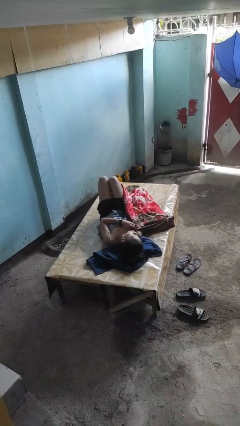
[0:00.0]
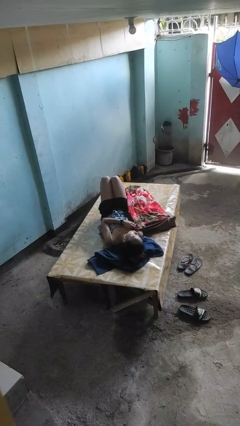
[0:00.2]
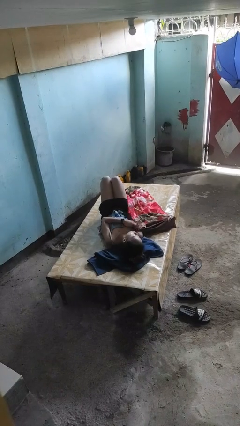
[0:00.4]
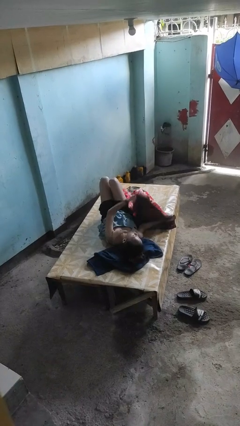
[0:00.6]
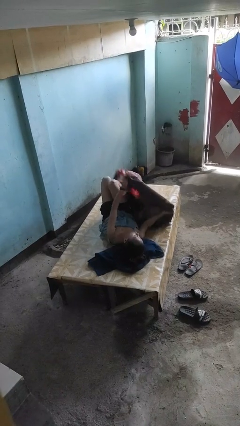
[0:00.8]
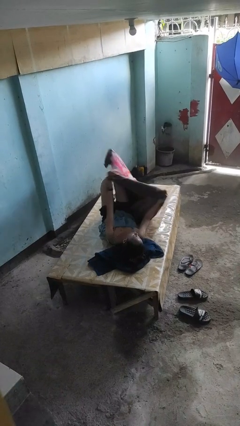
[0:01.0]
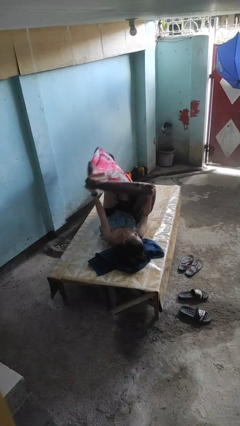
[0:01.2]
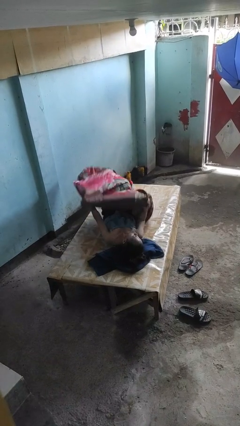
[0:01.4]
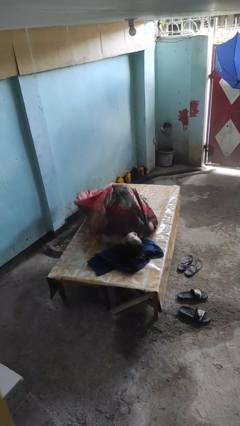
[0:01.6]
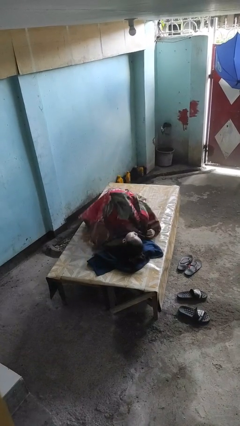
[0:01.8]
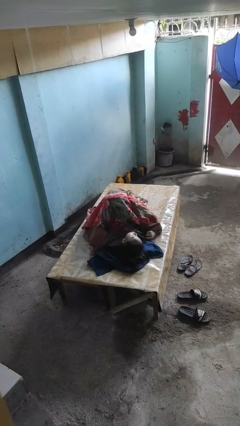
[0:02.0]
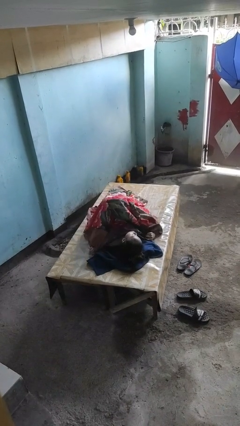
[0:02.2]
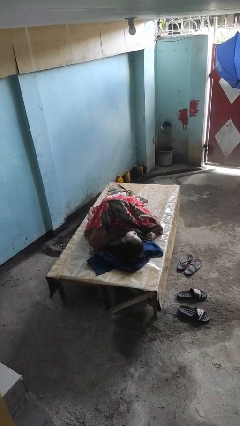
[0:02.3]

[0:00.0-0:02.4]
person covers with blanket

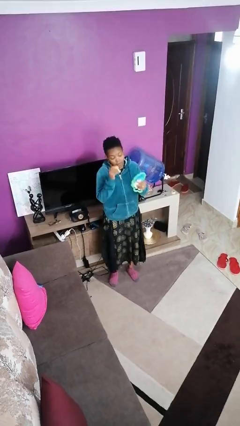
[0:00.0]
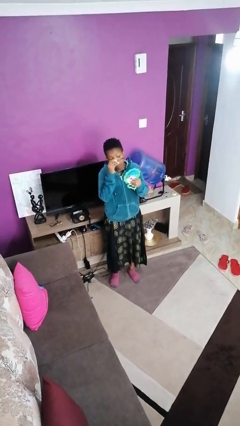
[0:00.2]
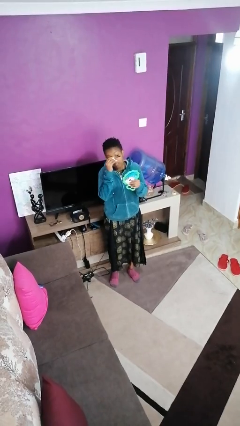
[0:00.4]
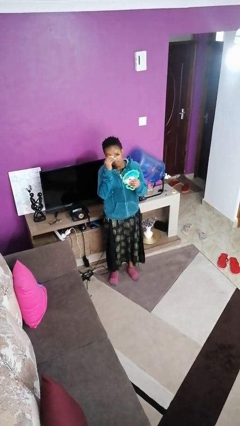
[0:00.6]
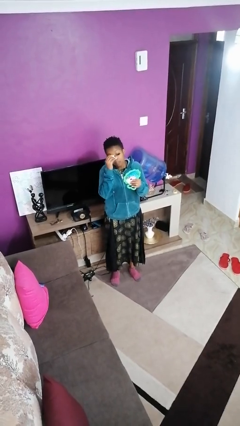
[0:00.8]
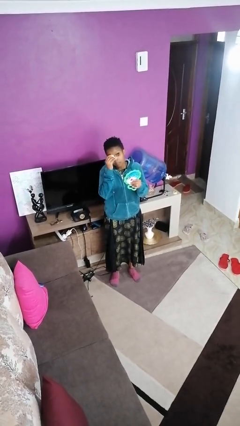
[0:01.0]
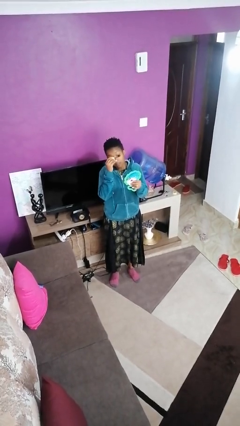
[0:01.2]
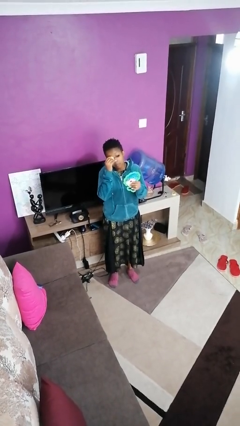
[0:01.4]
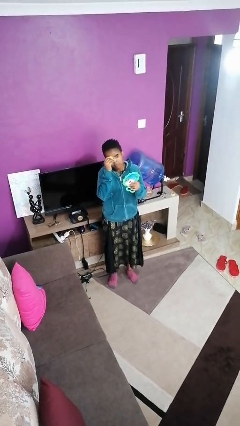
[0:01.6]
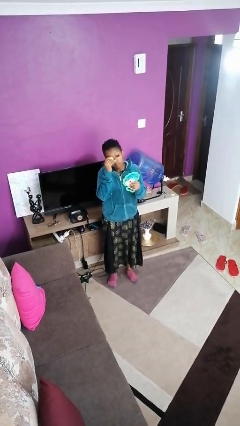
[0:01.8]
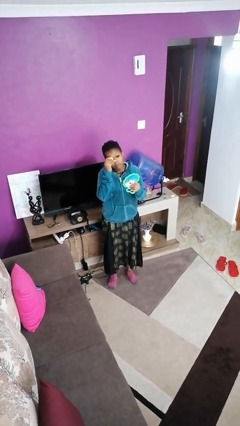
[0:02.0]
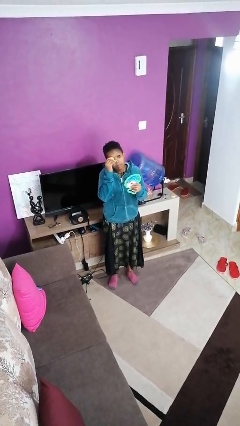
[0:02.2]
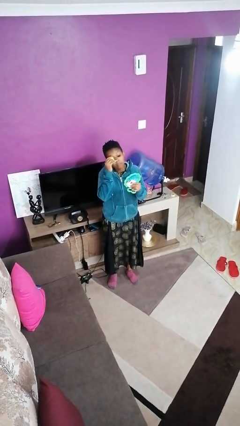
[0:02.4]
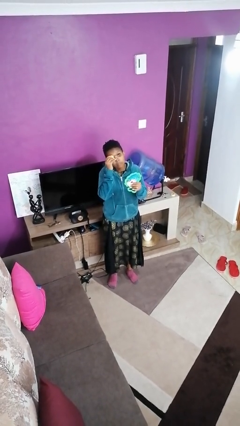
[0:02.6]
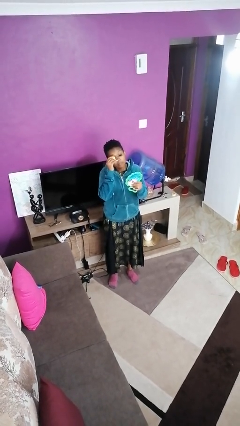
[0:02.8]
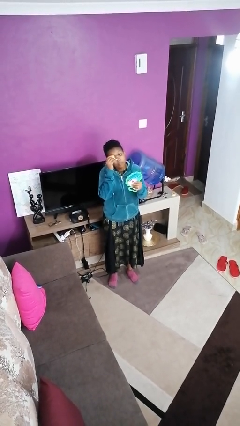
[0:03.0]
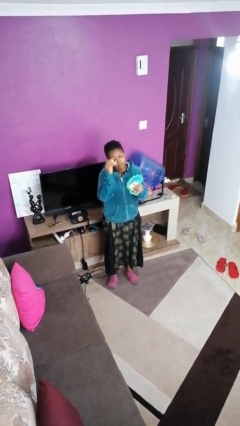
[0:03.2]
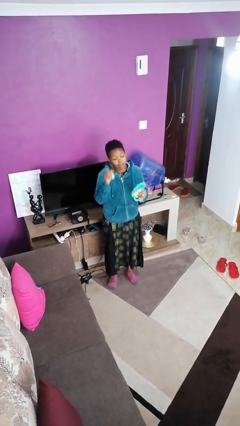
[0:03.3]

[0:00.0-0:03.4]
person applies eye makeup

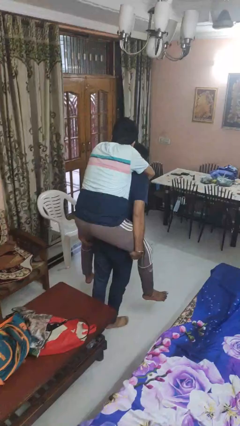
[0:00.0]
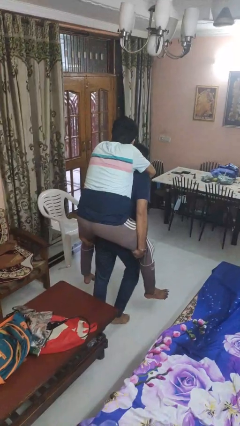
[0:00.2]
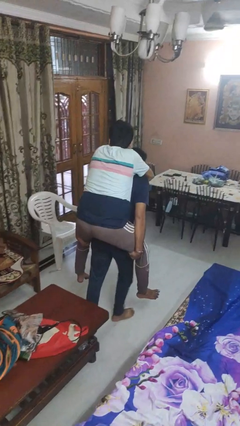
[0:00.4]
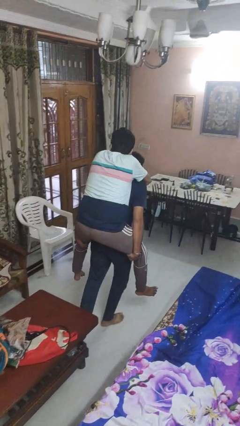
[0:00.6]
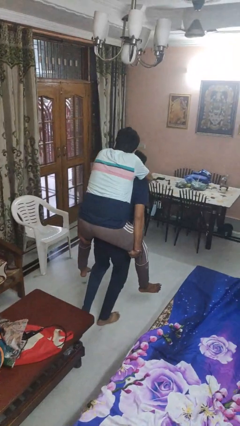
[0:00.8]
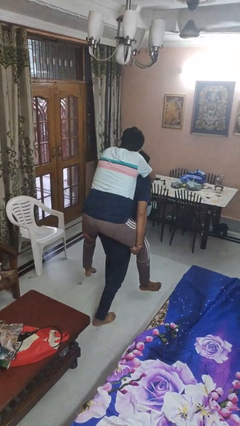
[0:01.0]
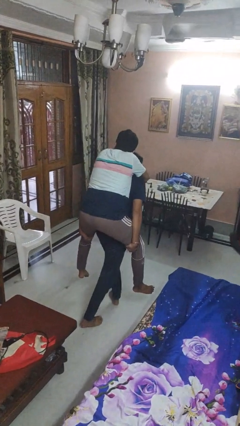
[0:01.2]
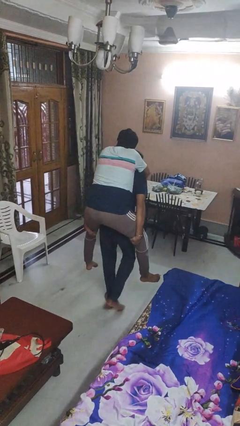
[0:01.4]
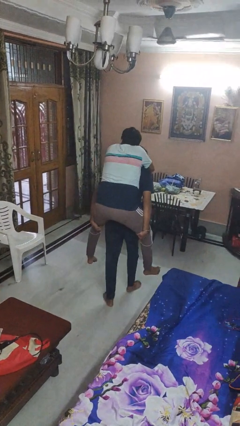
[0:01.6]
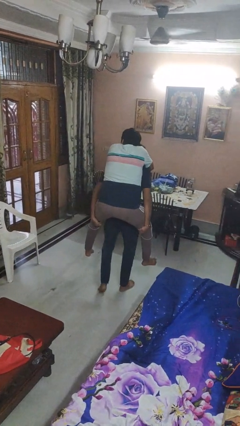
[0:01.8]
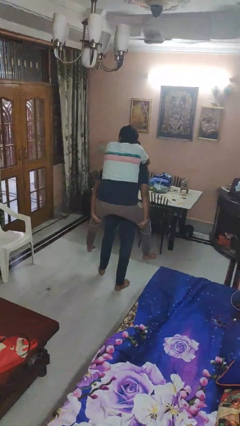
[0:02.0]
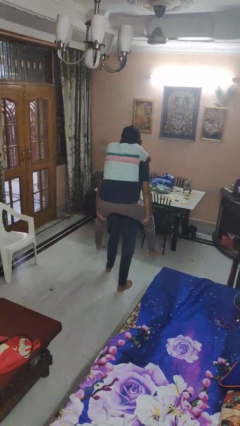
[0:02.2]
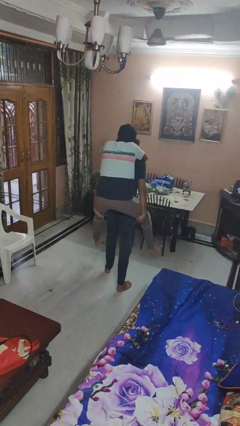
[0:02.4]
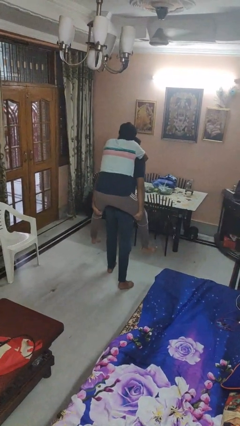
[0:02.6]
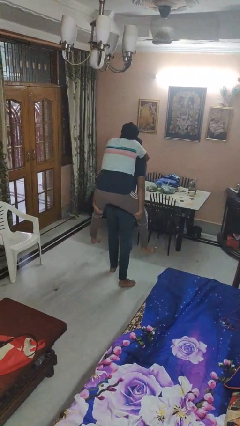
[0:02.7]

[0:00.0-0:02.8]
person carries person on back

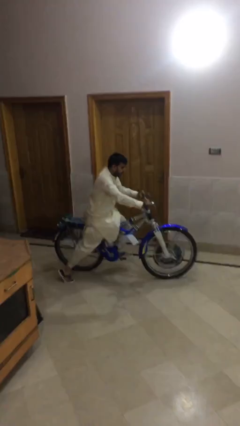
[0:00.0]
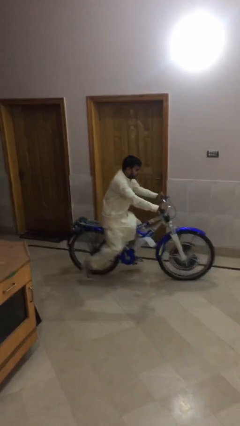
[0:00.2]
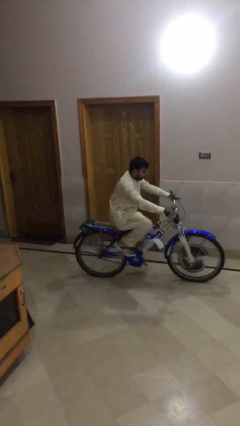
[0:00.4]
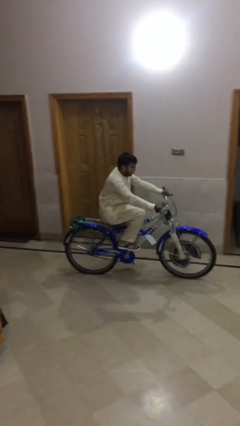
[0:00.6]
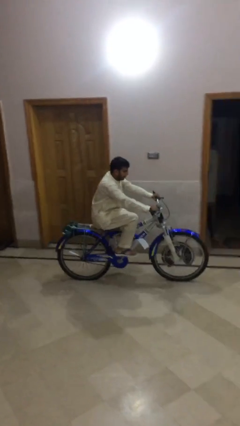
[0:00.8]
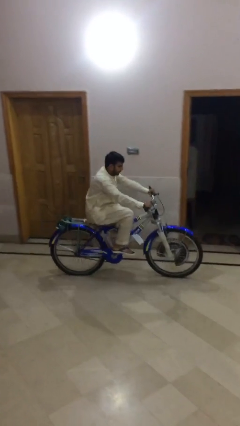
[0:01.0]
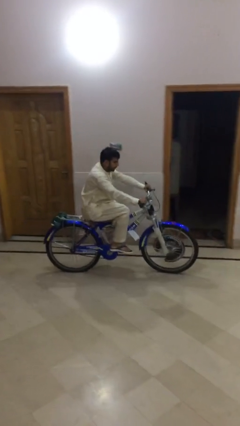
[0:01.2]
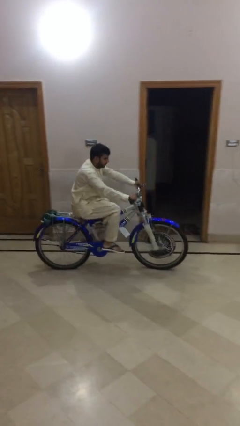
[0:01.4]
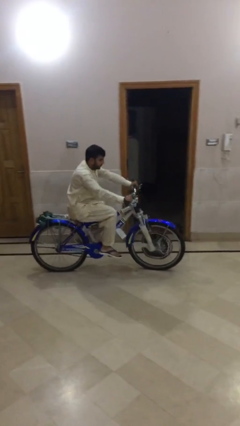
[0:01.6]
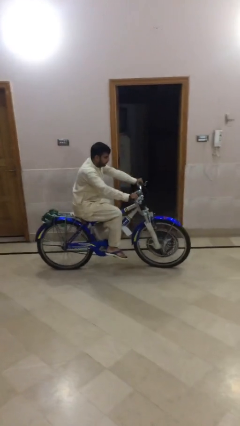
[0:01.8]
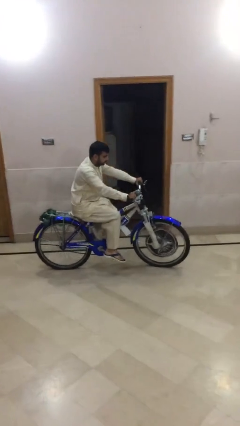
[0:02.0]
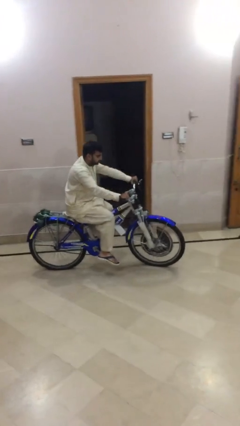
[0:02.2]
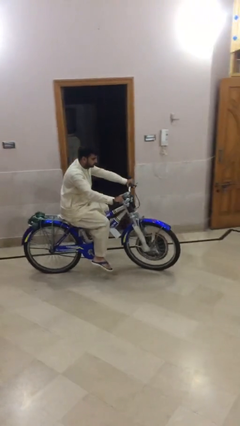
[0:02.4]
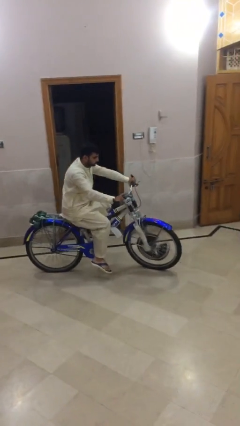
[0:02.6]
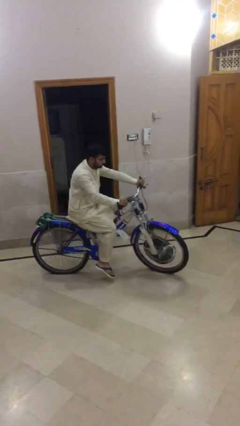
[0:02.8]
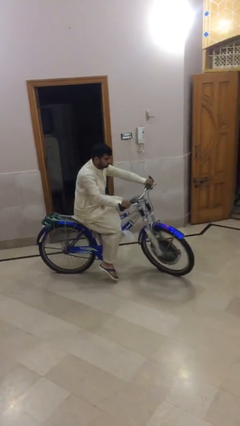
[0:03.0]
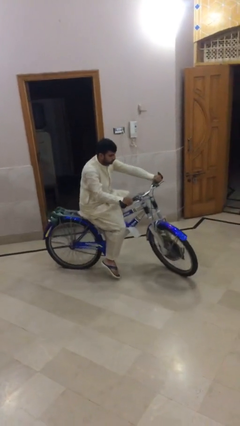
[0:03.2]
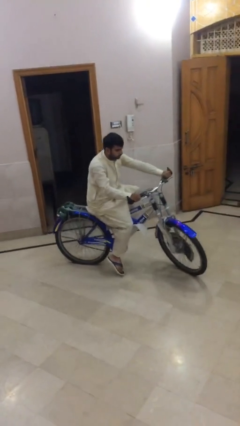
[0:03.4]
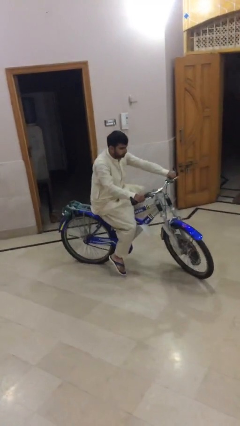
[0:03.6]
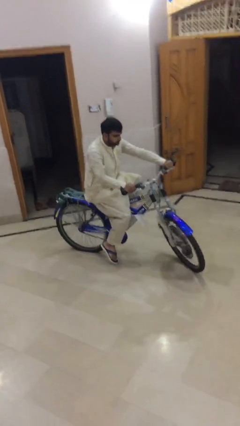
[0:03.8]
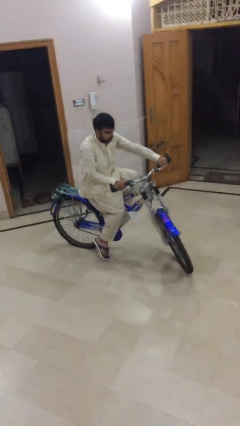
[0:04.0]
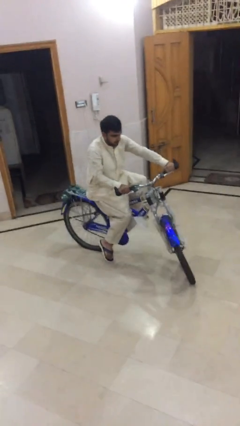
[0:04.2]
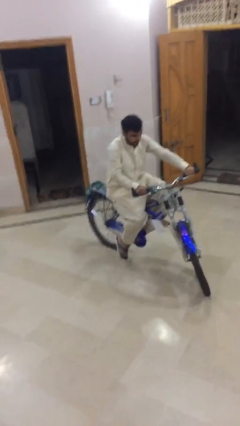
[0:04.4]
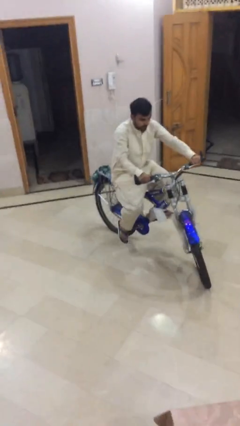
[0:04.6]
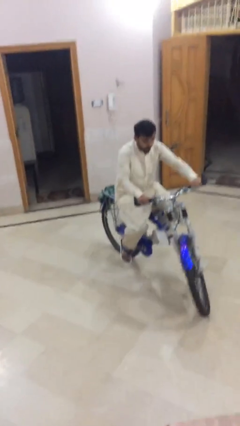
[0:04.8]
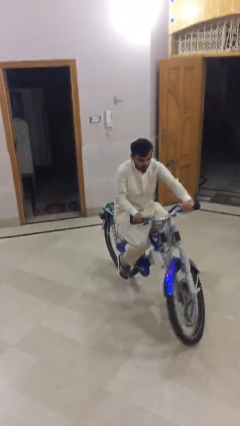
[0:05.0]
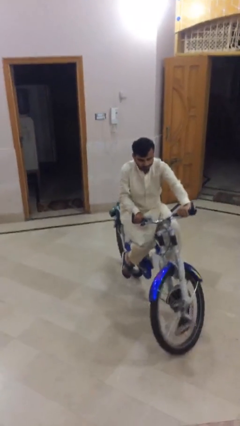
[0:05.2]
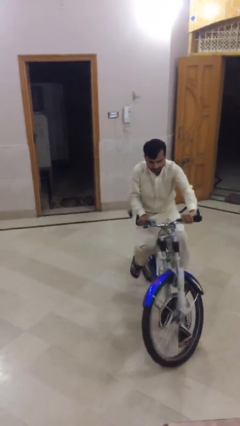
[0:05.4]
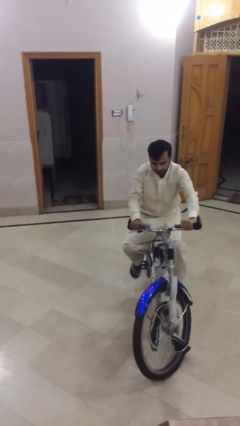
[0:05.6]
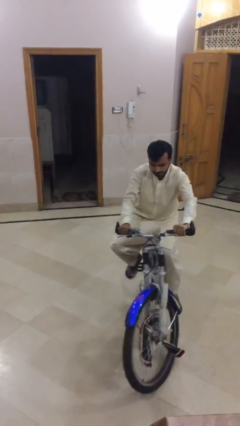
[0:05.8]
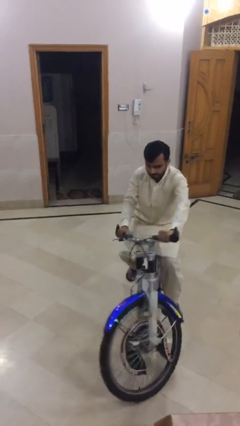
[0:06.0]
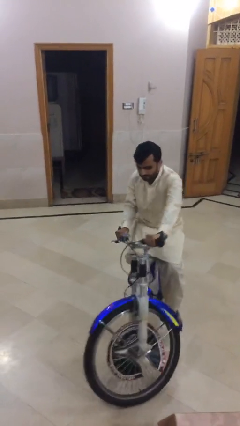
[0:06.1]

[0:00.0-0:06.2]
person rides bicycle

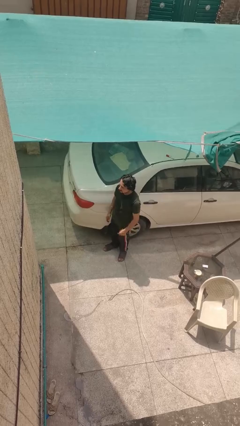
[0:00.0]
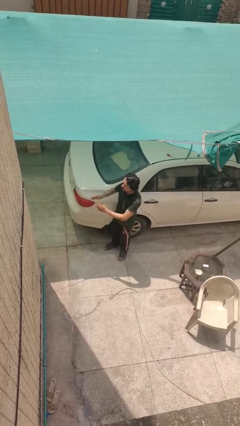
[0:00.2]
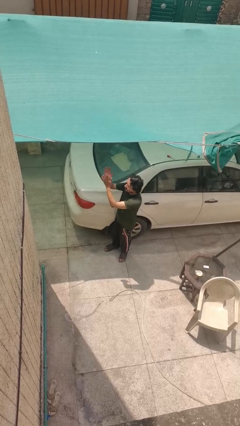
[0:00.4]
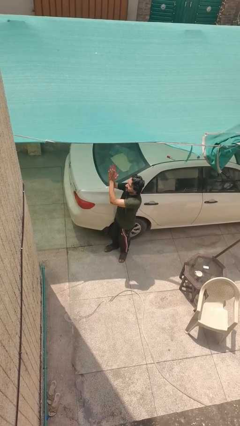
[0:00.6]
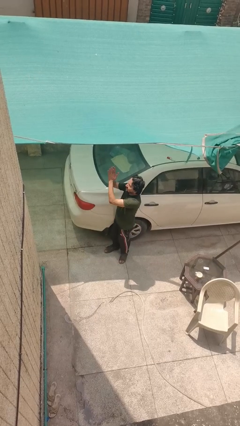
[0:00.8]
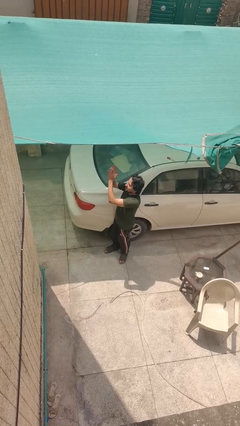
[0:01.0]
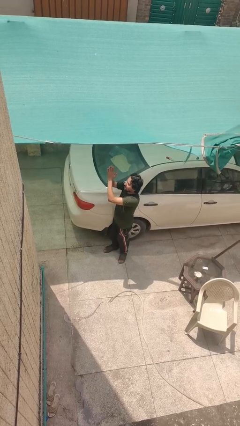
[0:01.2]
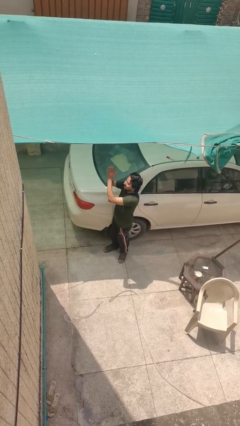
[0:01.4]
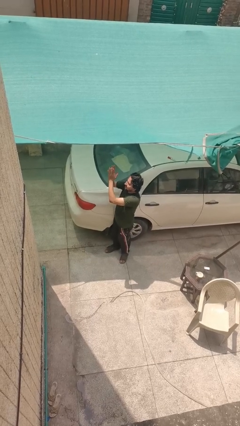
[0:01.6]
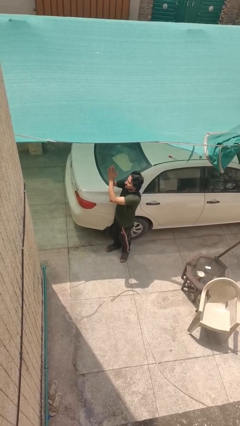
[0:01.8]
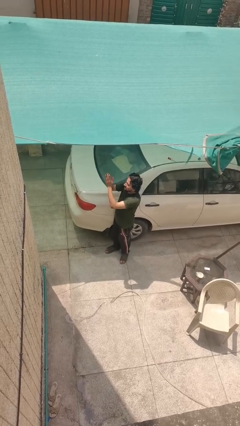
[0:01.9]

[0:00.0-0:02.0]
person claps hands

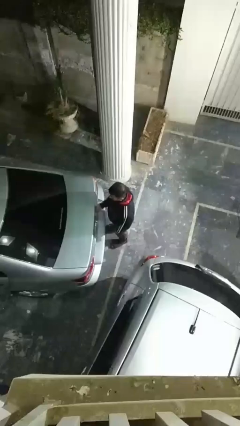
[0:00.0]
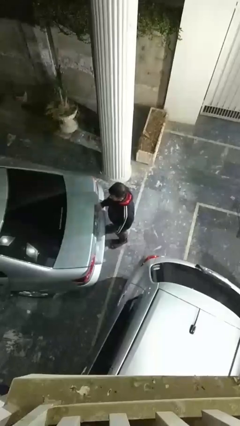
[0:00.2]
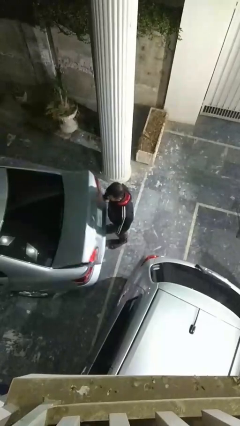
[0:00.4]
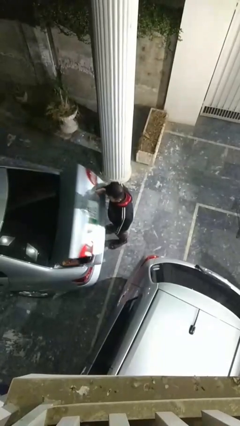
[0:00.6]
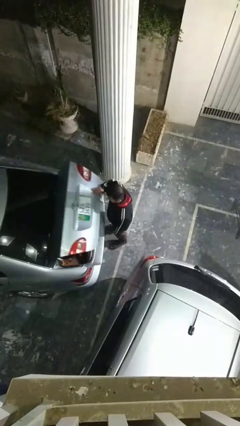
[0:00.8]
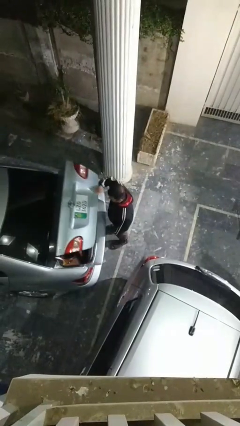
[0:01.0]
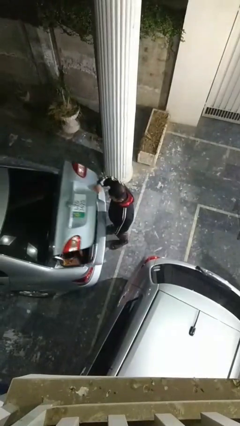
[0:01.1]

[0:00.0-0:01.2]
person opens car trunk
